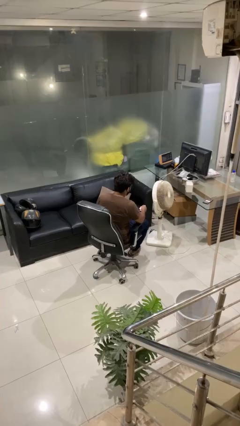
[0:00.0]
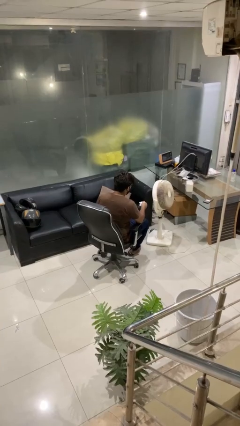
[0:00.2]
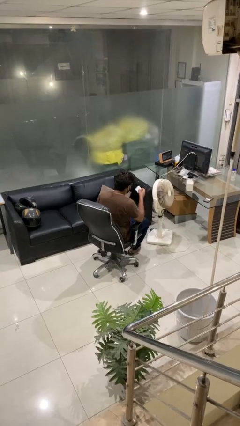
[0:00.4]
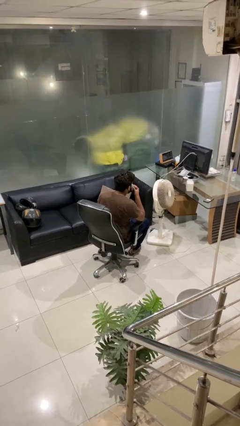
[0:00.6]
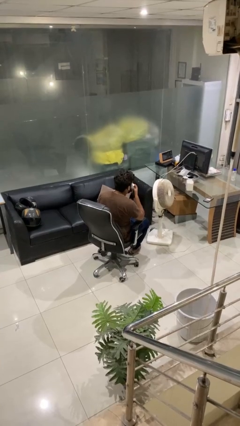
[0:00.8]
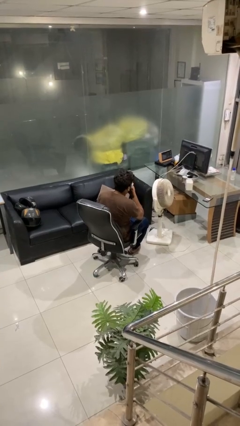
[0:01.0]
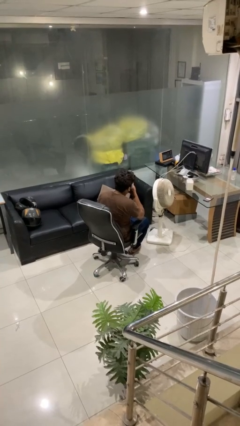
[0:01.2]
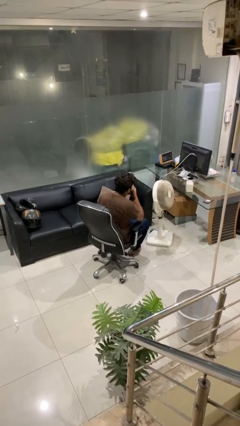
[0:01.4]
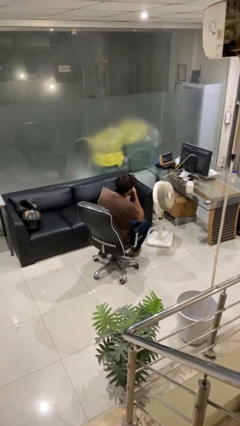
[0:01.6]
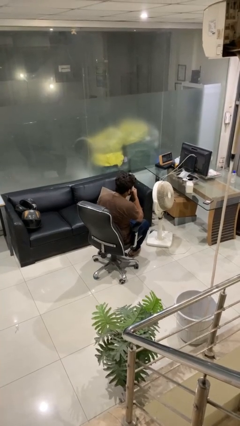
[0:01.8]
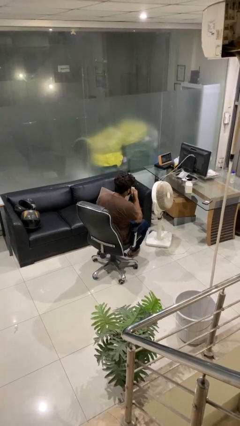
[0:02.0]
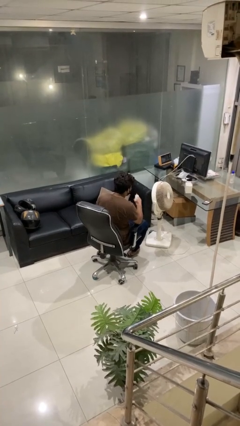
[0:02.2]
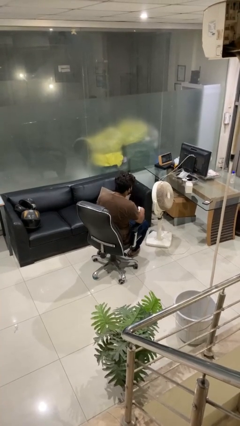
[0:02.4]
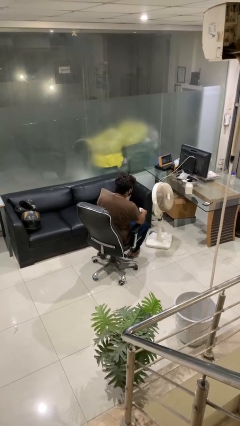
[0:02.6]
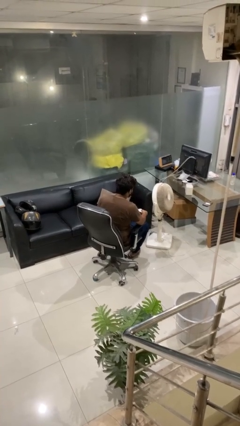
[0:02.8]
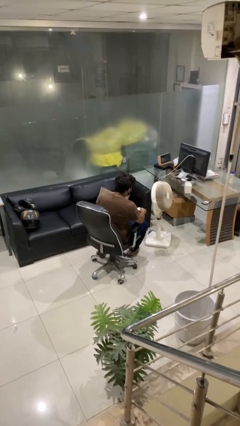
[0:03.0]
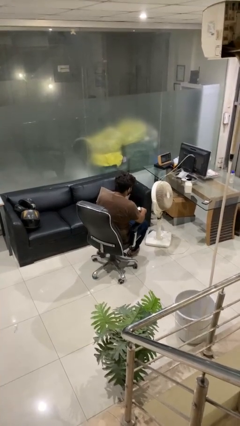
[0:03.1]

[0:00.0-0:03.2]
person blows nose

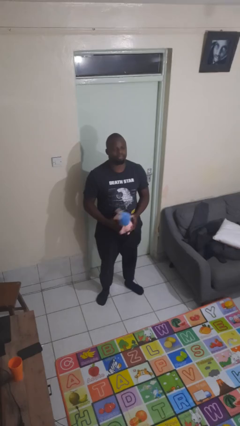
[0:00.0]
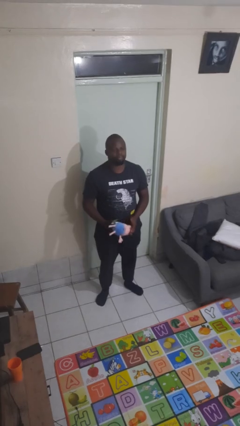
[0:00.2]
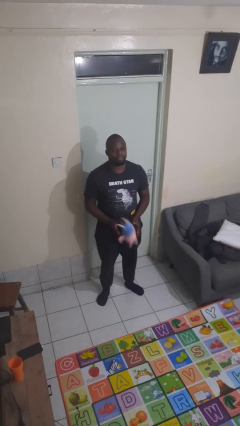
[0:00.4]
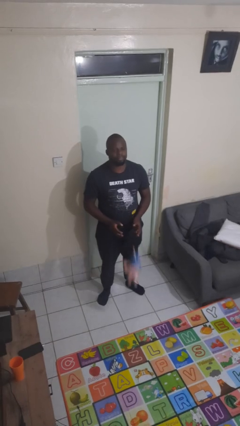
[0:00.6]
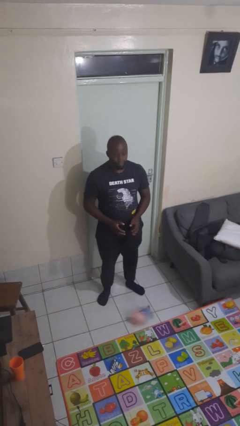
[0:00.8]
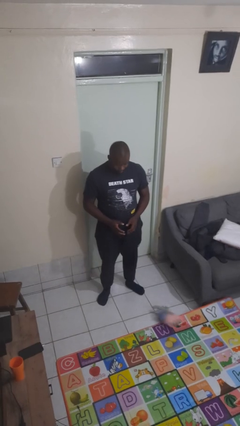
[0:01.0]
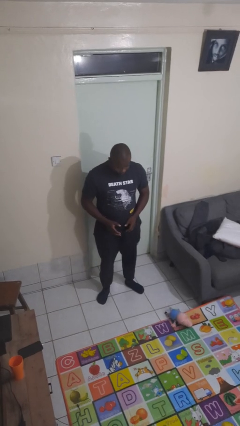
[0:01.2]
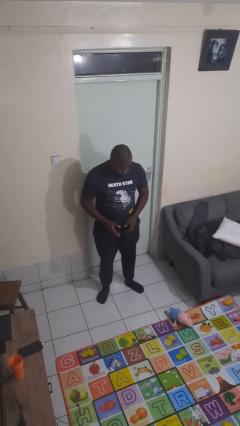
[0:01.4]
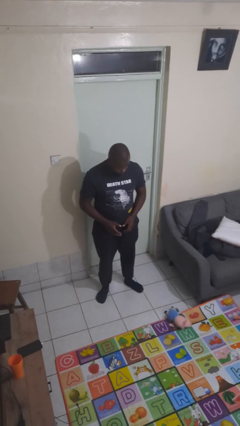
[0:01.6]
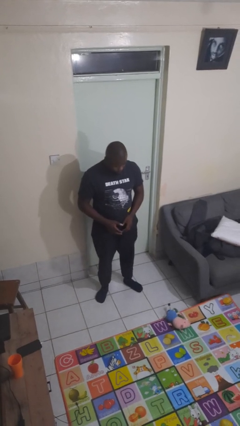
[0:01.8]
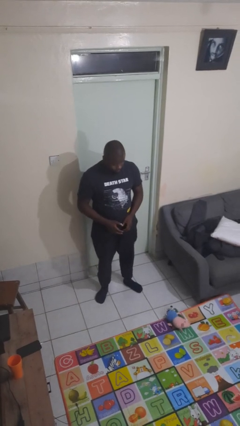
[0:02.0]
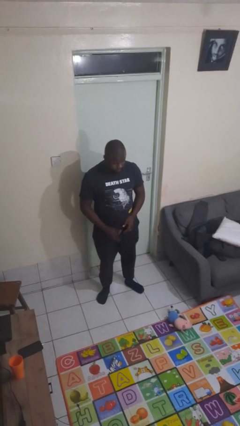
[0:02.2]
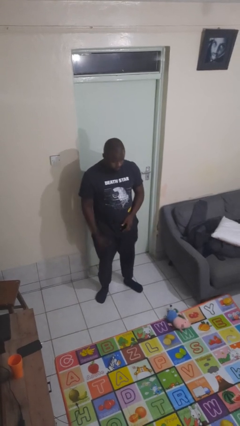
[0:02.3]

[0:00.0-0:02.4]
person drops object

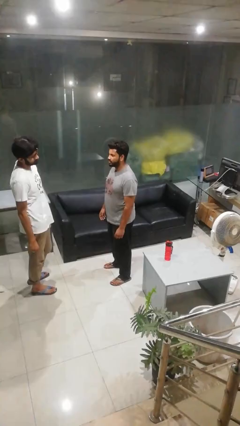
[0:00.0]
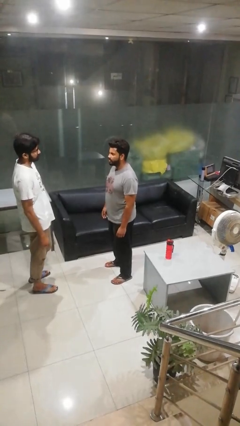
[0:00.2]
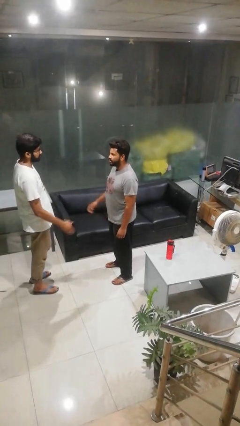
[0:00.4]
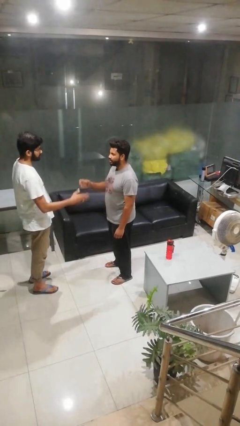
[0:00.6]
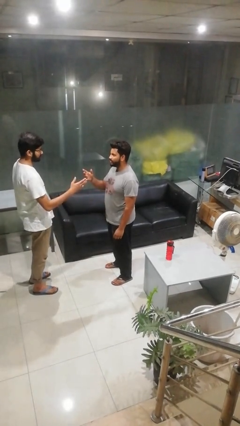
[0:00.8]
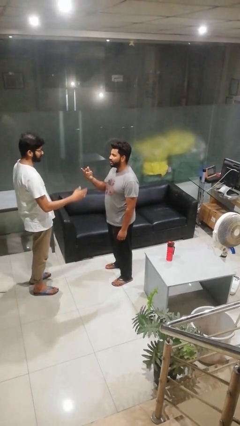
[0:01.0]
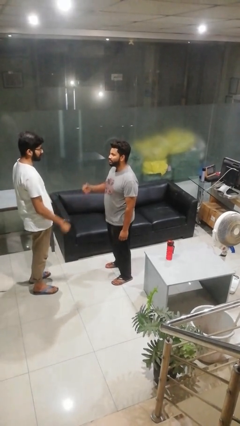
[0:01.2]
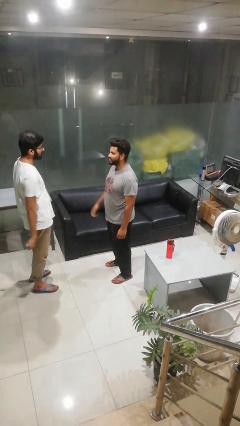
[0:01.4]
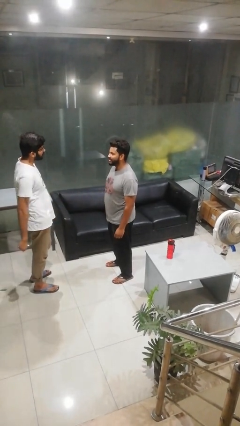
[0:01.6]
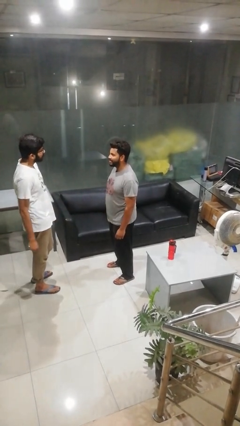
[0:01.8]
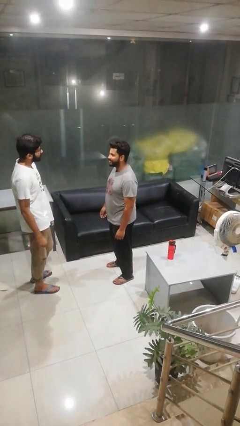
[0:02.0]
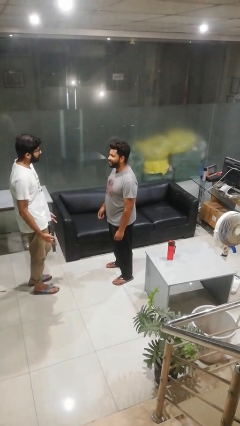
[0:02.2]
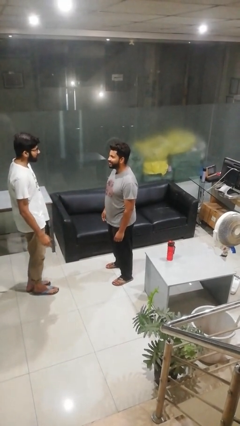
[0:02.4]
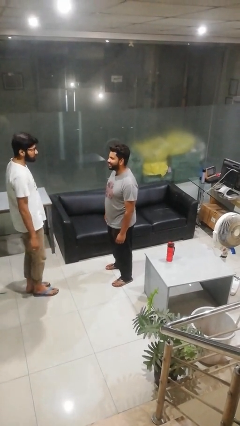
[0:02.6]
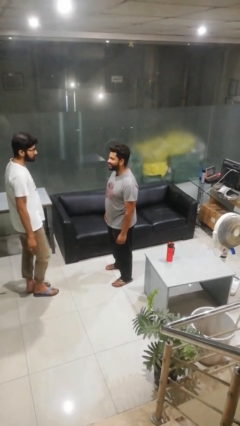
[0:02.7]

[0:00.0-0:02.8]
person talks to person

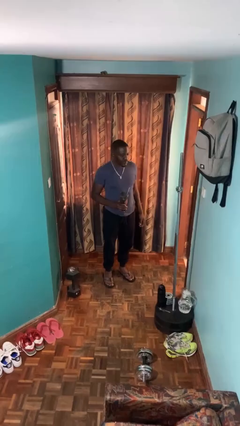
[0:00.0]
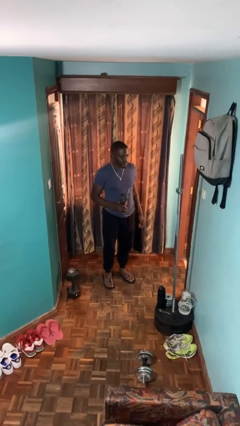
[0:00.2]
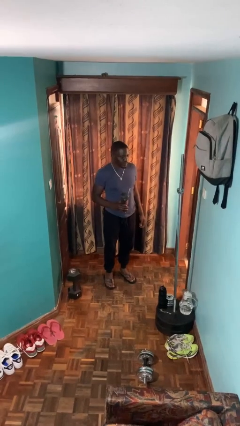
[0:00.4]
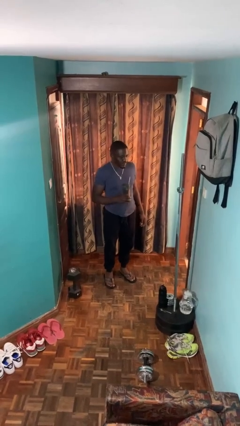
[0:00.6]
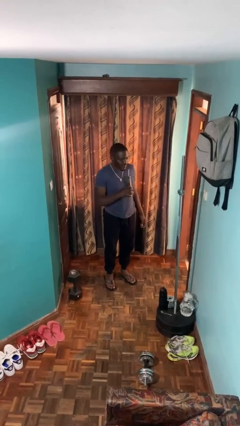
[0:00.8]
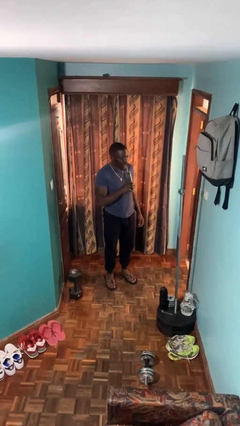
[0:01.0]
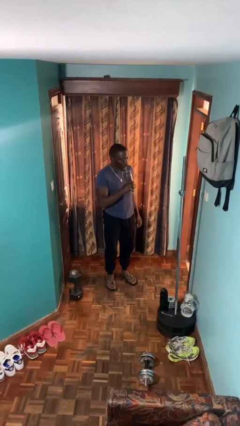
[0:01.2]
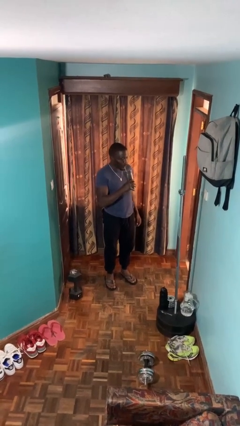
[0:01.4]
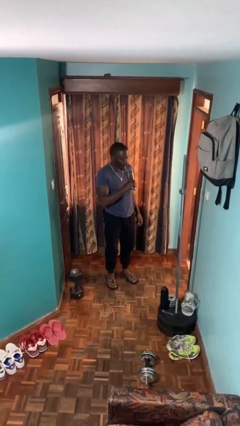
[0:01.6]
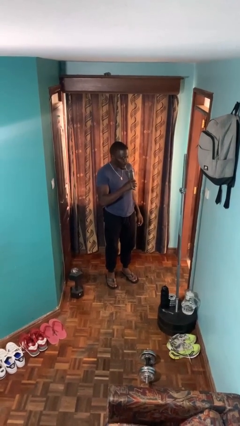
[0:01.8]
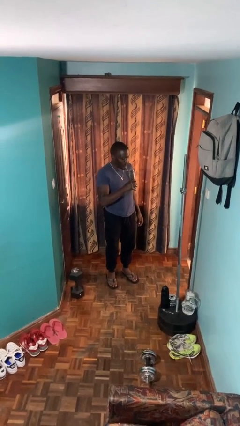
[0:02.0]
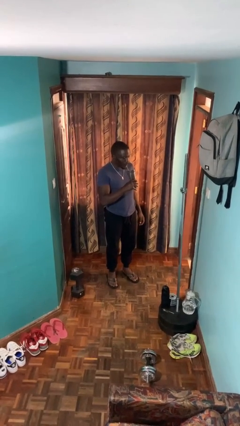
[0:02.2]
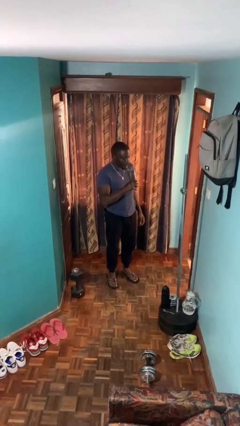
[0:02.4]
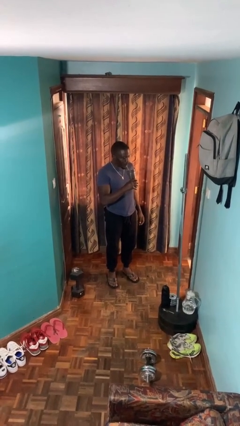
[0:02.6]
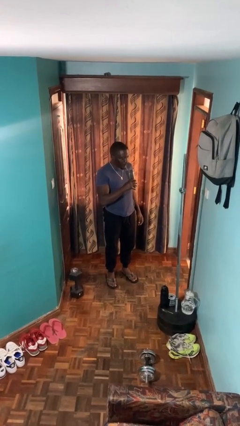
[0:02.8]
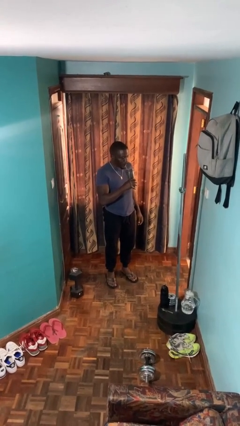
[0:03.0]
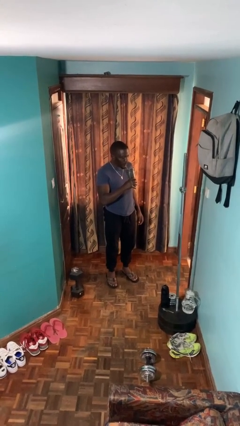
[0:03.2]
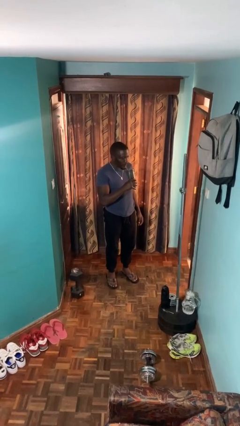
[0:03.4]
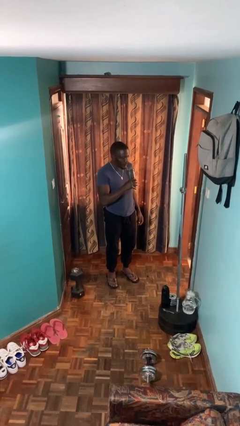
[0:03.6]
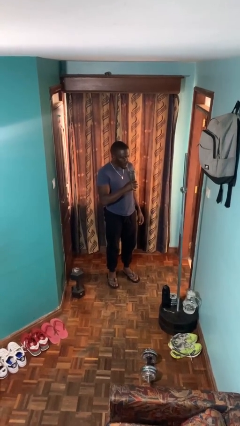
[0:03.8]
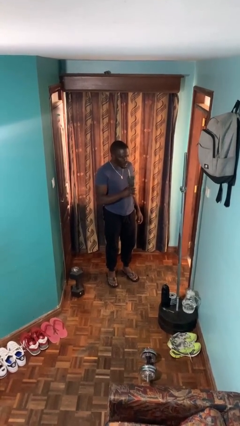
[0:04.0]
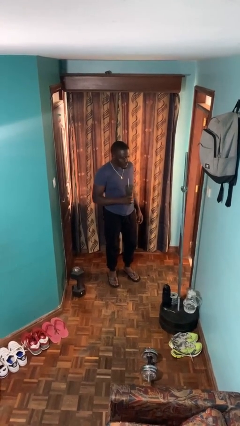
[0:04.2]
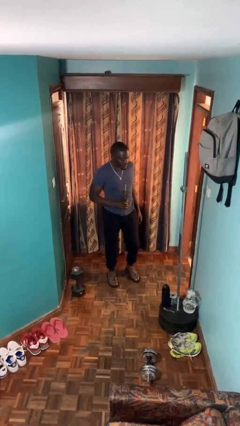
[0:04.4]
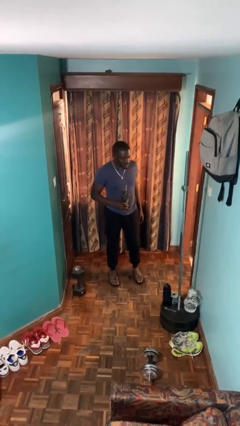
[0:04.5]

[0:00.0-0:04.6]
person drinks from straw

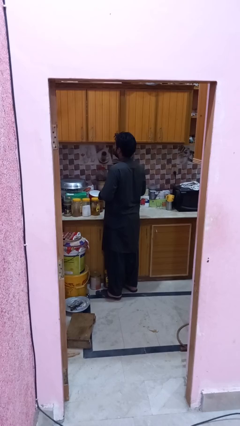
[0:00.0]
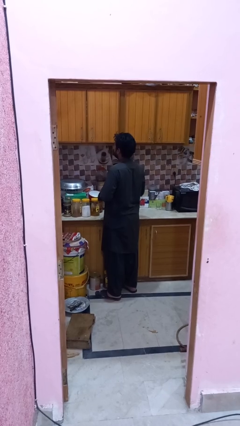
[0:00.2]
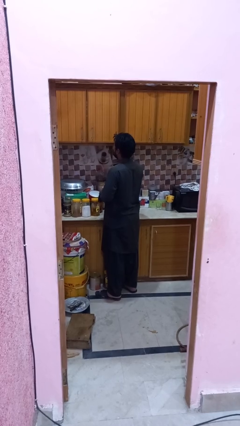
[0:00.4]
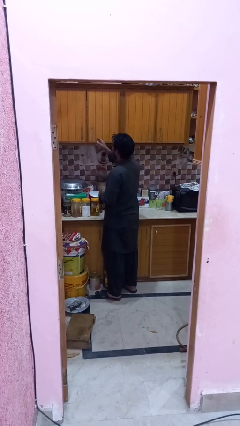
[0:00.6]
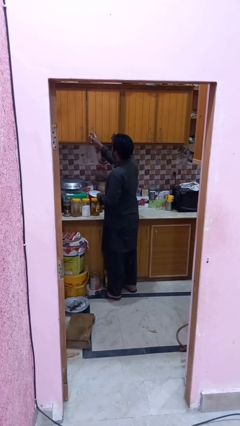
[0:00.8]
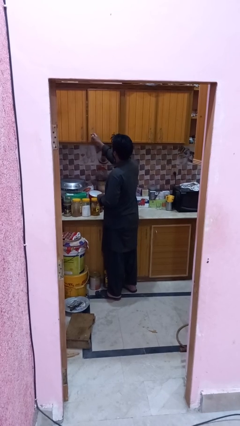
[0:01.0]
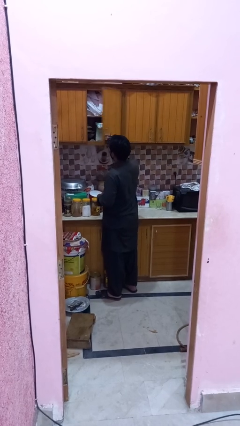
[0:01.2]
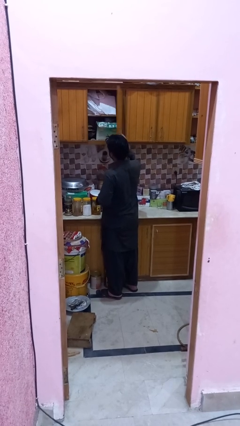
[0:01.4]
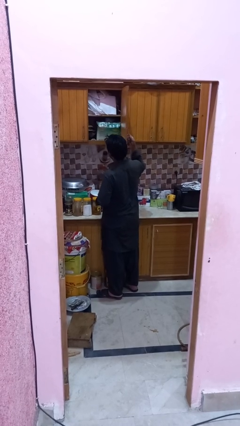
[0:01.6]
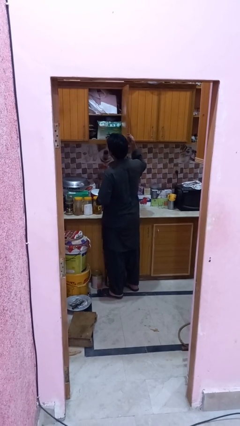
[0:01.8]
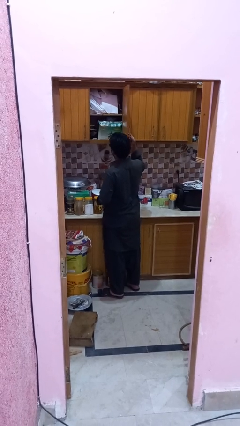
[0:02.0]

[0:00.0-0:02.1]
person opens cabinet

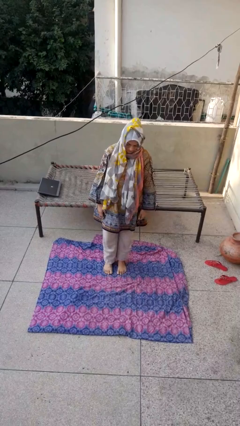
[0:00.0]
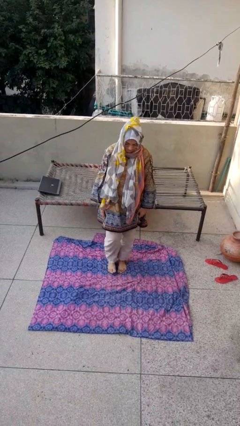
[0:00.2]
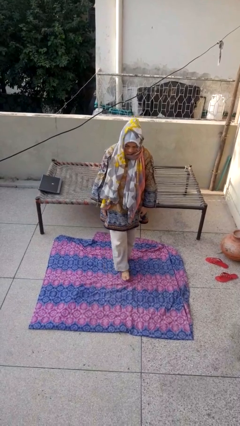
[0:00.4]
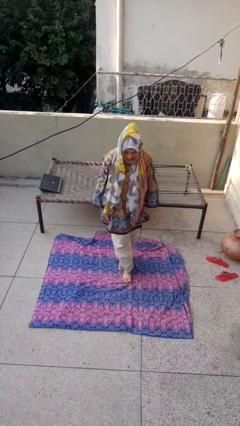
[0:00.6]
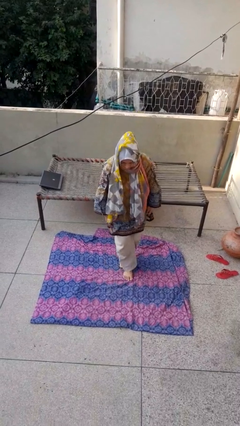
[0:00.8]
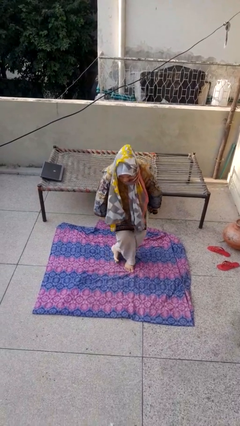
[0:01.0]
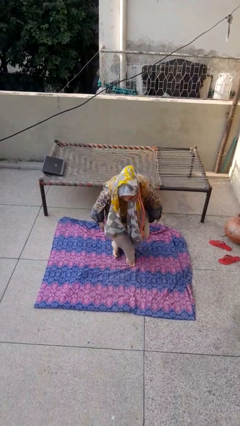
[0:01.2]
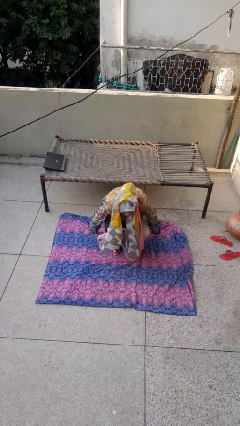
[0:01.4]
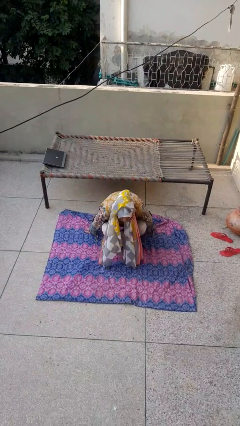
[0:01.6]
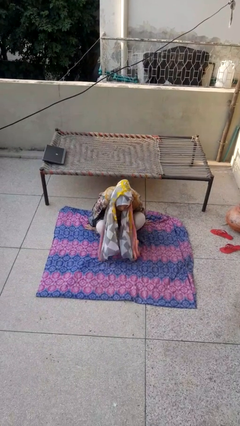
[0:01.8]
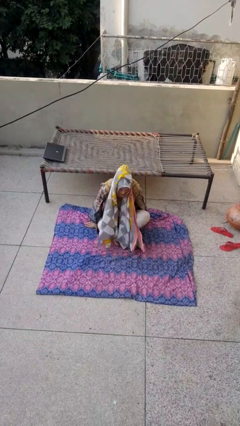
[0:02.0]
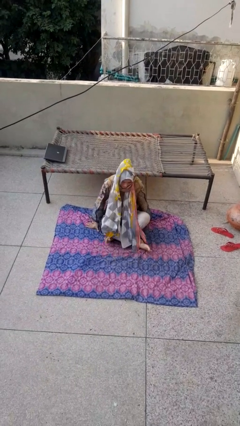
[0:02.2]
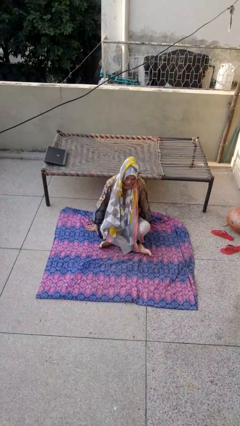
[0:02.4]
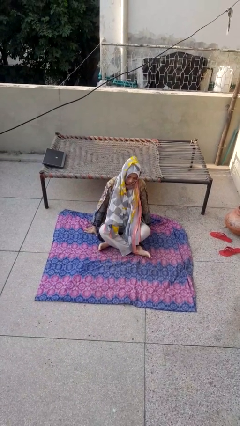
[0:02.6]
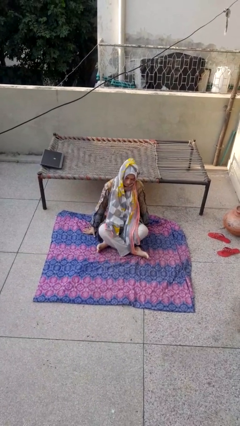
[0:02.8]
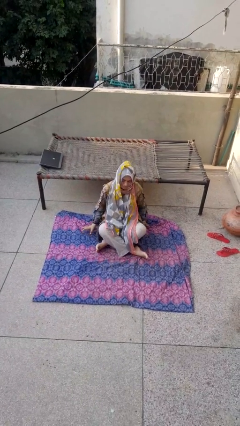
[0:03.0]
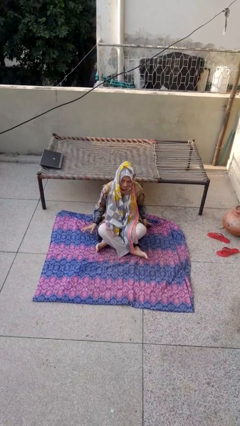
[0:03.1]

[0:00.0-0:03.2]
person sits crisscross
